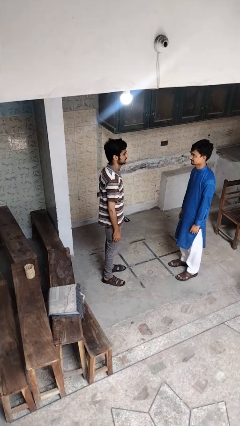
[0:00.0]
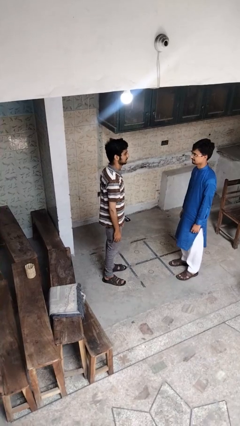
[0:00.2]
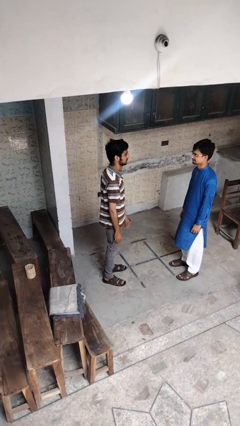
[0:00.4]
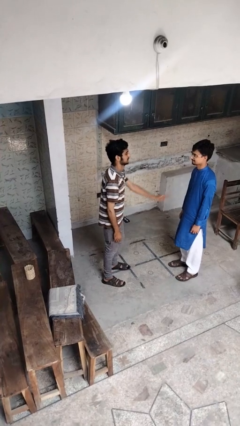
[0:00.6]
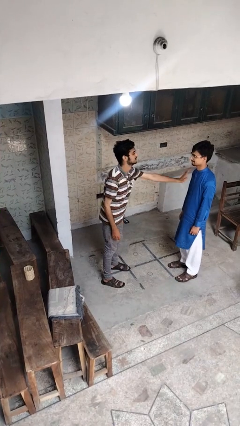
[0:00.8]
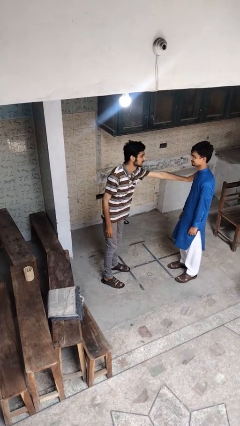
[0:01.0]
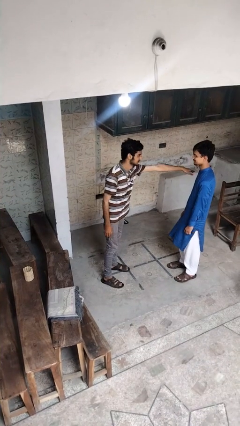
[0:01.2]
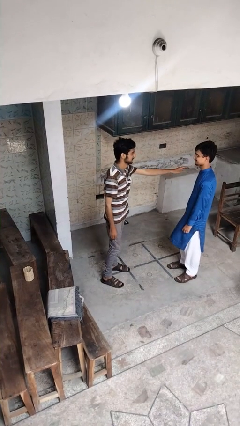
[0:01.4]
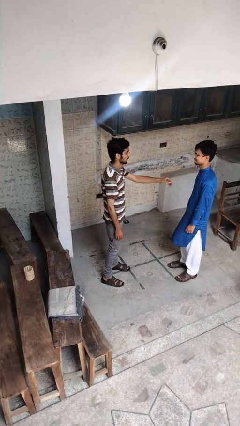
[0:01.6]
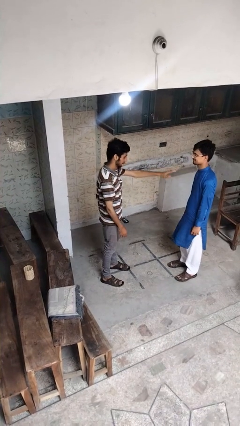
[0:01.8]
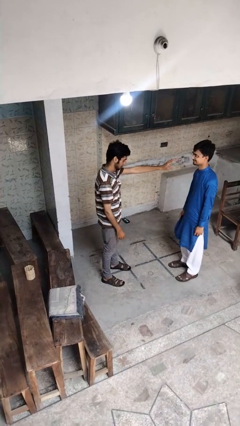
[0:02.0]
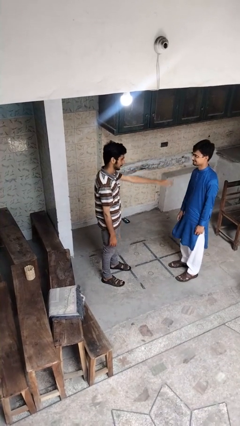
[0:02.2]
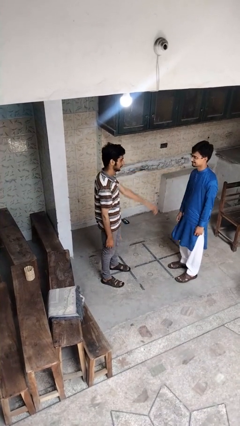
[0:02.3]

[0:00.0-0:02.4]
person shoves person

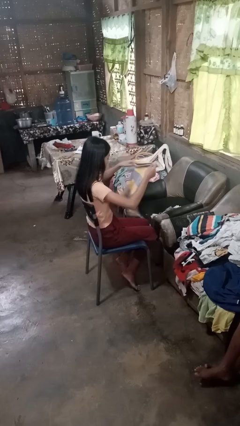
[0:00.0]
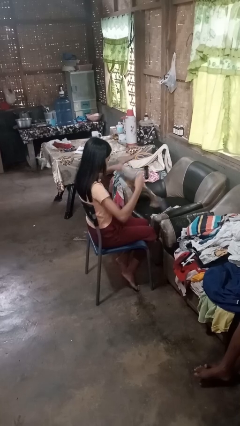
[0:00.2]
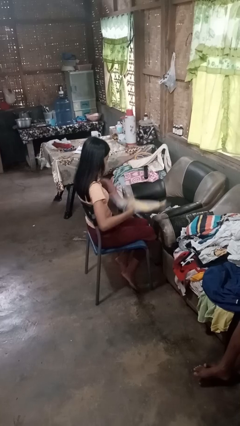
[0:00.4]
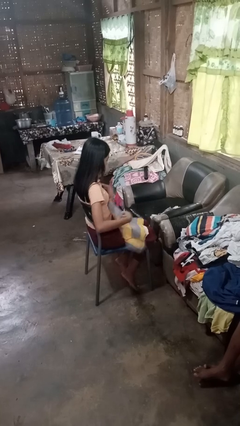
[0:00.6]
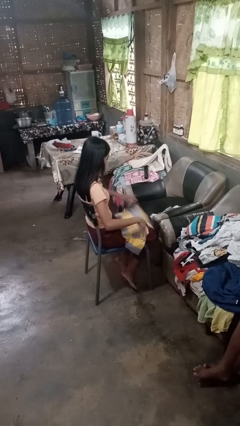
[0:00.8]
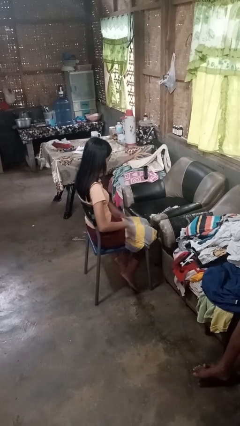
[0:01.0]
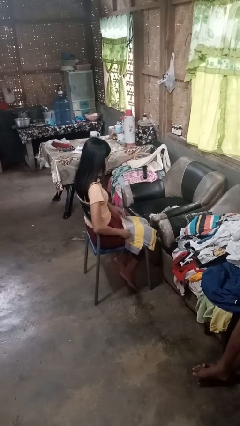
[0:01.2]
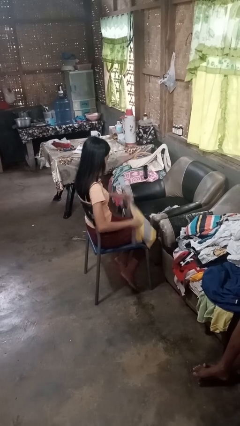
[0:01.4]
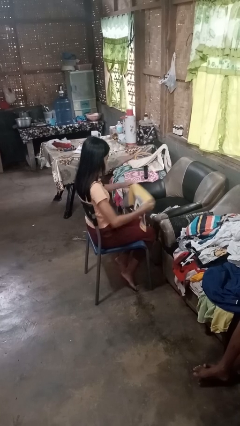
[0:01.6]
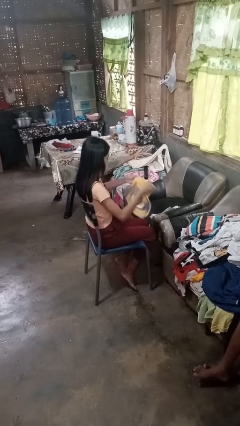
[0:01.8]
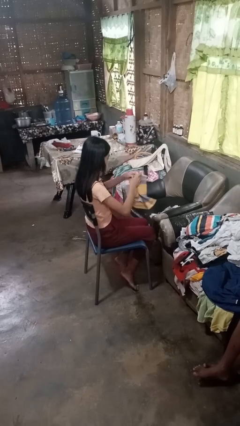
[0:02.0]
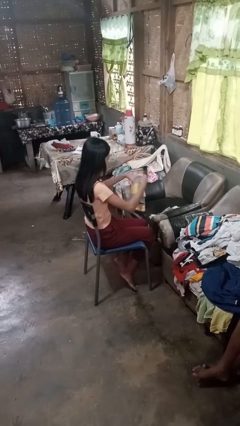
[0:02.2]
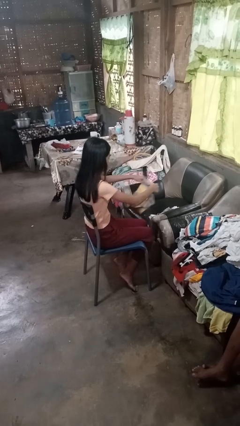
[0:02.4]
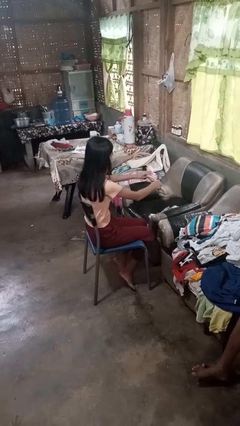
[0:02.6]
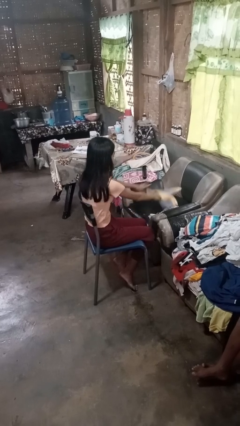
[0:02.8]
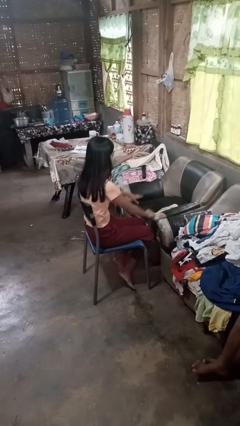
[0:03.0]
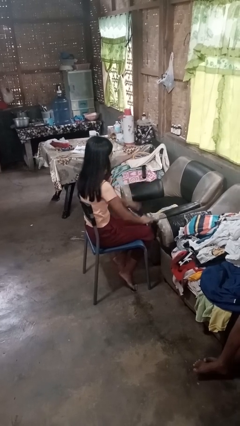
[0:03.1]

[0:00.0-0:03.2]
person folds shirt

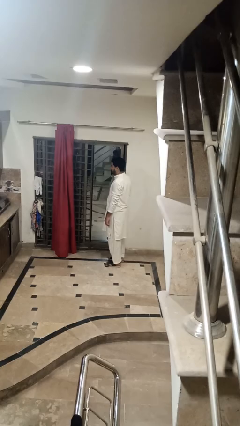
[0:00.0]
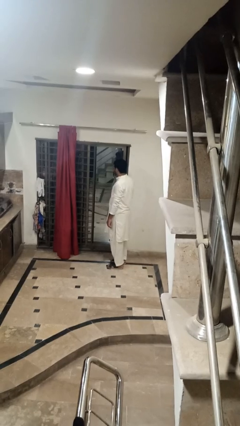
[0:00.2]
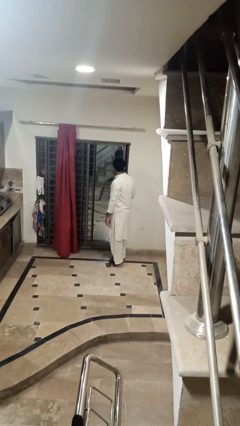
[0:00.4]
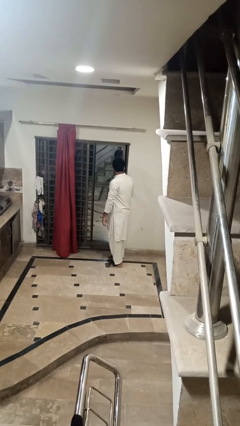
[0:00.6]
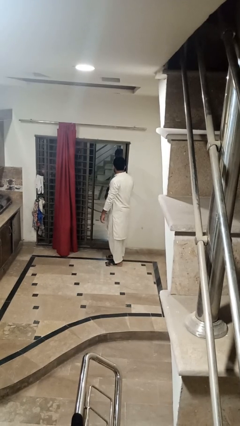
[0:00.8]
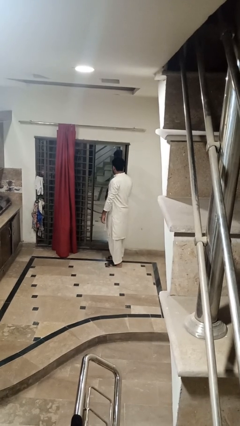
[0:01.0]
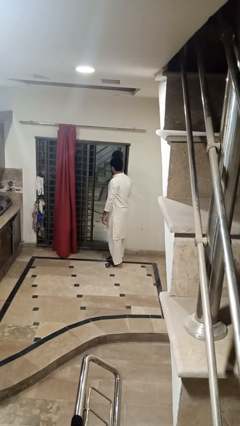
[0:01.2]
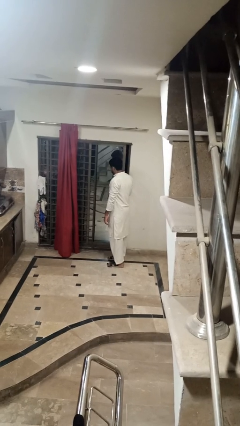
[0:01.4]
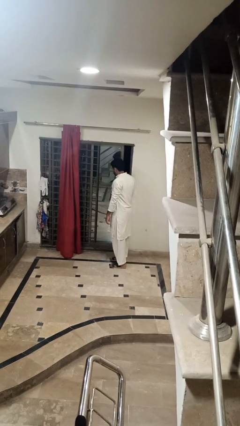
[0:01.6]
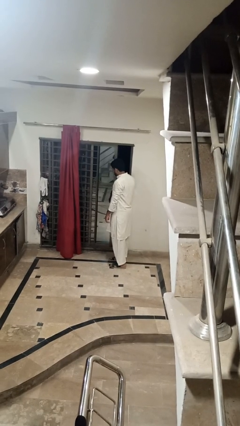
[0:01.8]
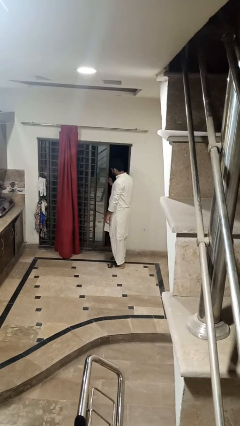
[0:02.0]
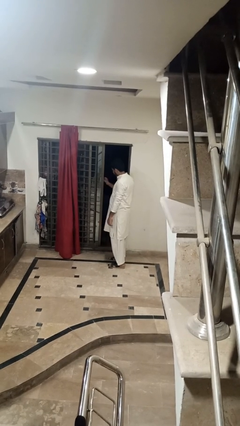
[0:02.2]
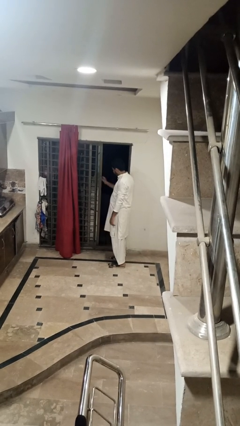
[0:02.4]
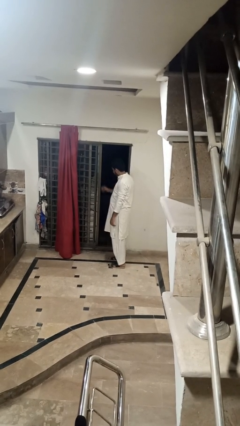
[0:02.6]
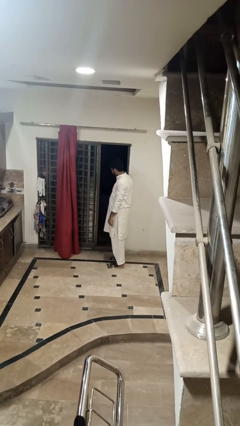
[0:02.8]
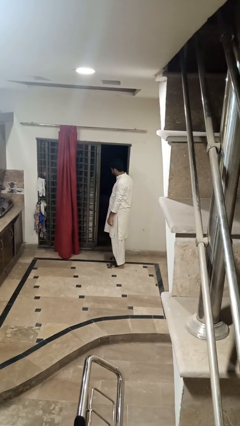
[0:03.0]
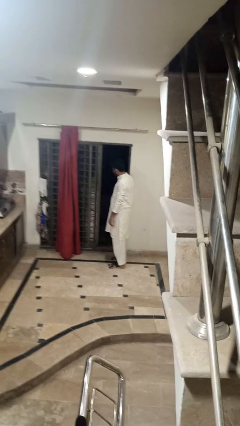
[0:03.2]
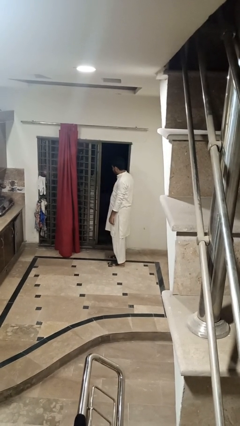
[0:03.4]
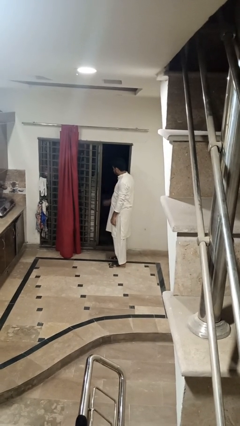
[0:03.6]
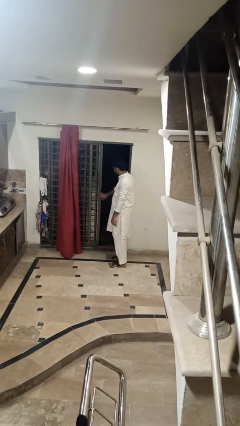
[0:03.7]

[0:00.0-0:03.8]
person opens home window

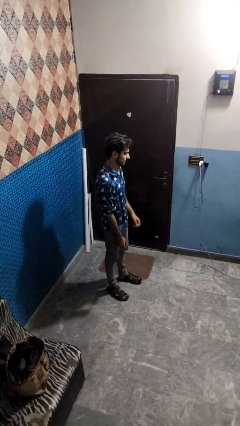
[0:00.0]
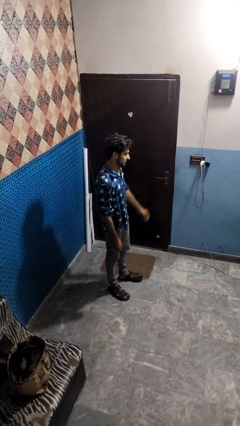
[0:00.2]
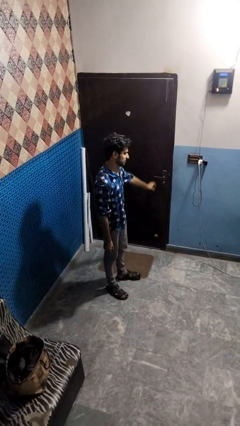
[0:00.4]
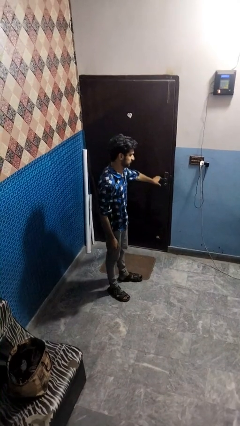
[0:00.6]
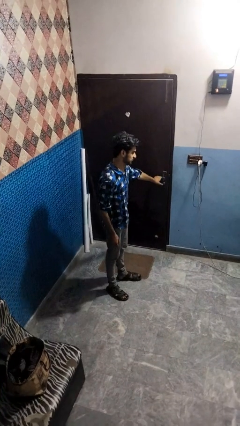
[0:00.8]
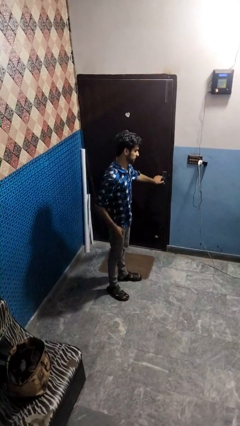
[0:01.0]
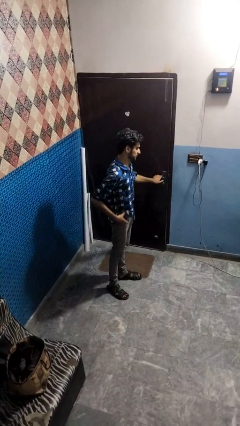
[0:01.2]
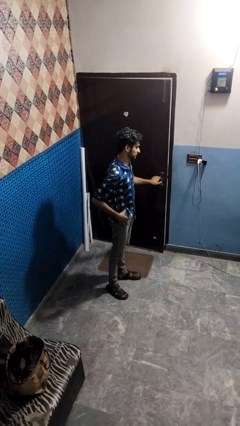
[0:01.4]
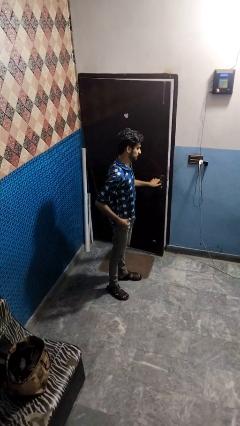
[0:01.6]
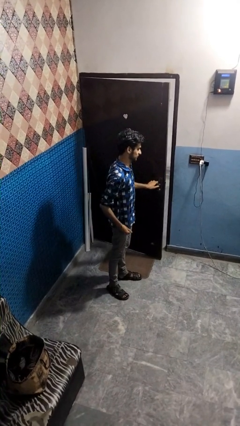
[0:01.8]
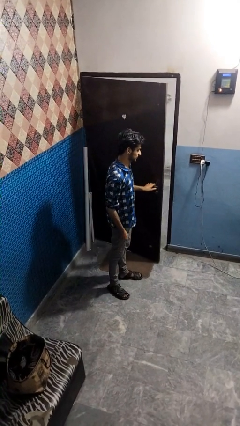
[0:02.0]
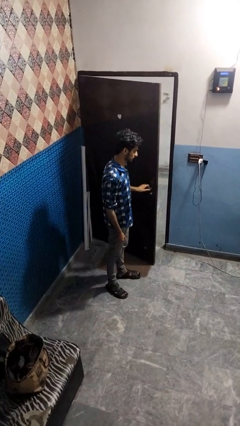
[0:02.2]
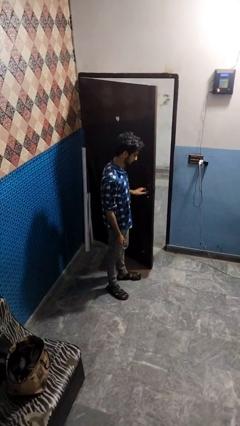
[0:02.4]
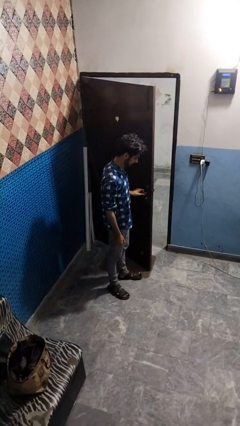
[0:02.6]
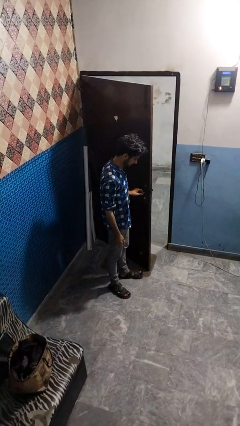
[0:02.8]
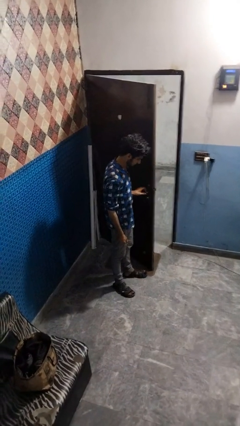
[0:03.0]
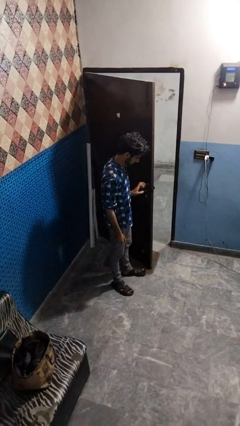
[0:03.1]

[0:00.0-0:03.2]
person opens facility door

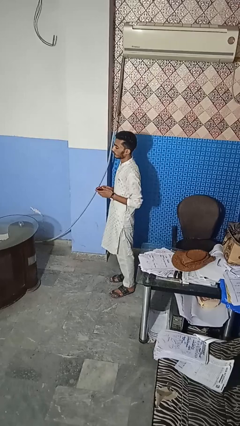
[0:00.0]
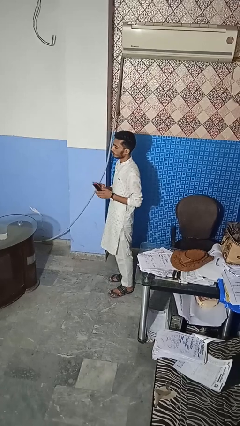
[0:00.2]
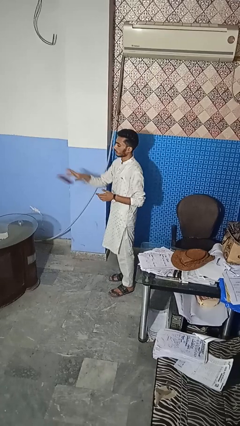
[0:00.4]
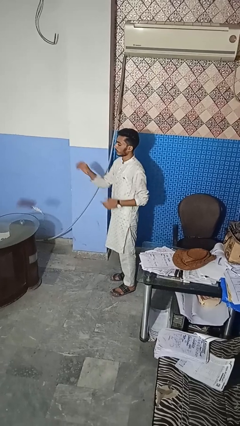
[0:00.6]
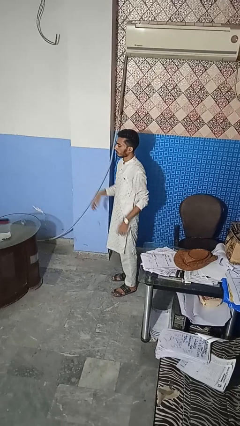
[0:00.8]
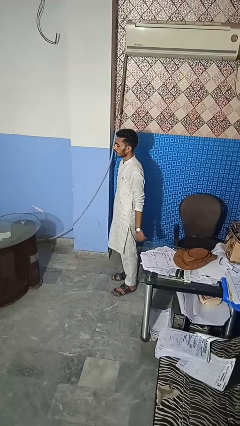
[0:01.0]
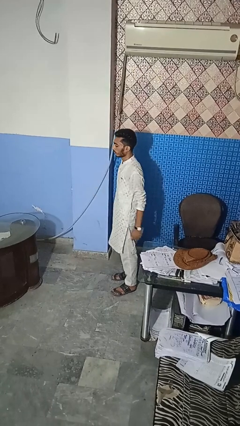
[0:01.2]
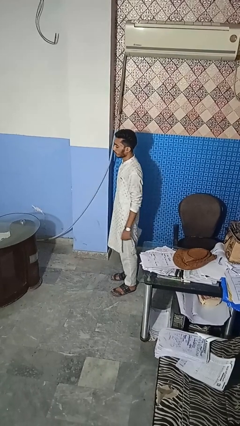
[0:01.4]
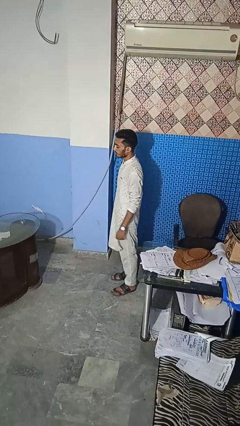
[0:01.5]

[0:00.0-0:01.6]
person throws object on table

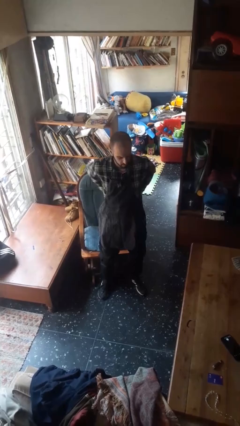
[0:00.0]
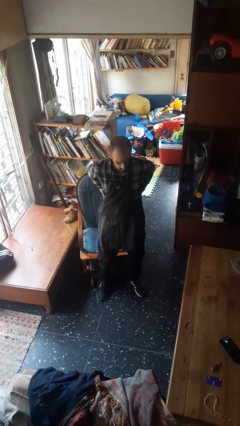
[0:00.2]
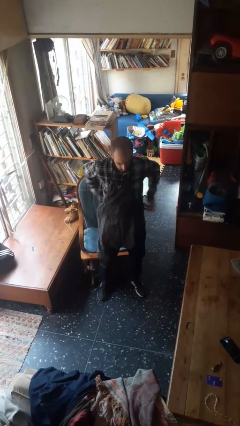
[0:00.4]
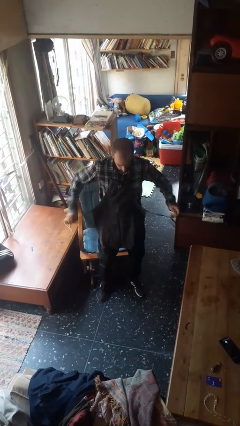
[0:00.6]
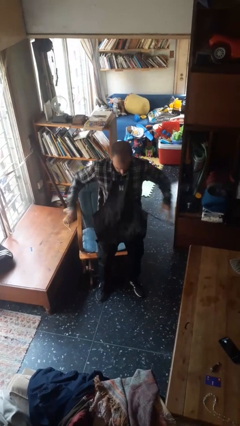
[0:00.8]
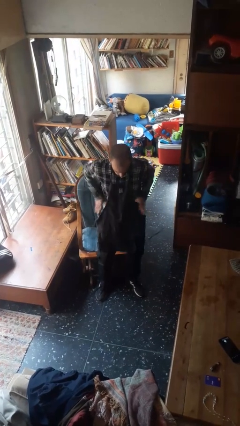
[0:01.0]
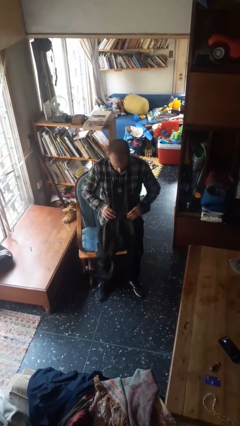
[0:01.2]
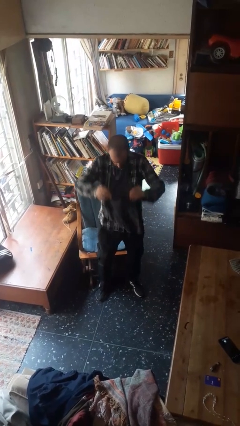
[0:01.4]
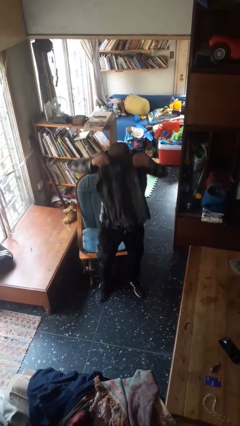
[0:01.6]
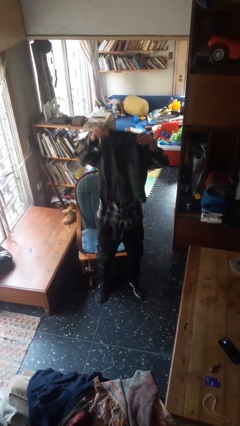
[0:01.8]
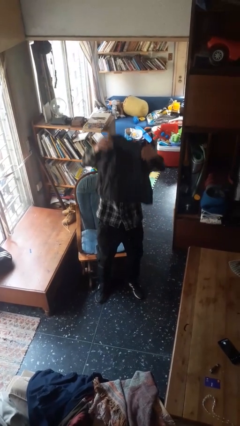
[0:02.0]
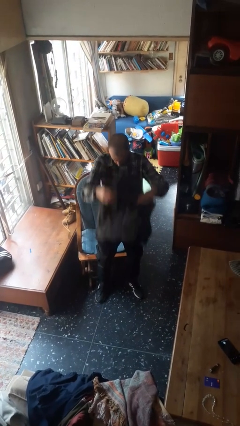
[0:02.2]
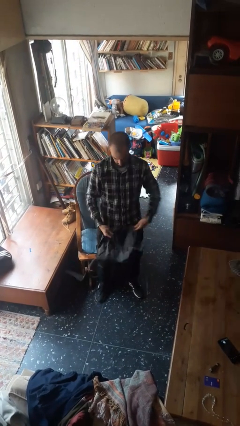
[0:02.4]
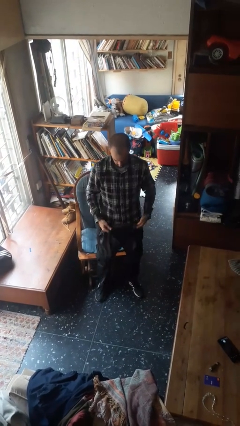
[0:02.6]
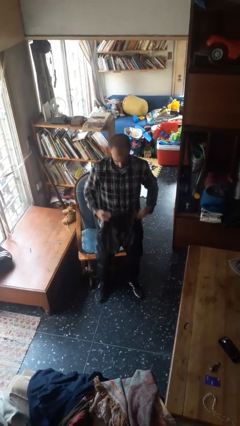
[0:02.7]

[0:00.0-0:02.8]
person takes off apron

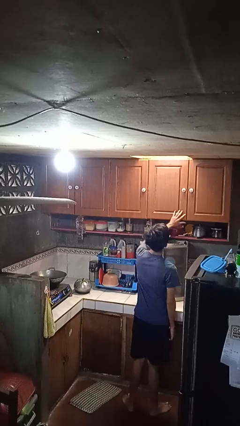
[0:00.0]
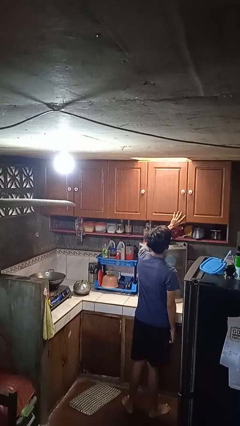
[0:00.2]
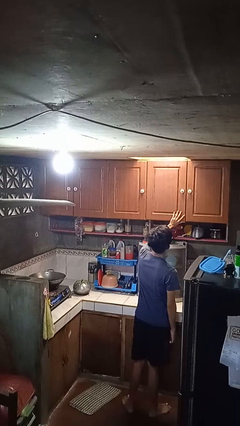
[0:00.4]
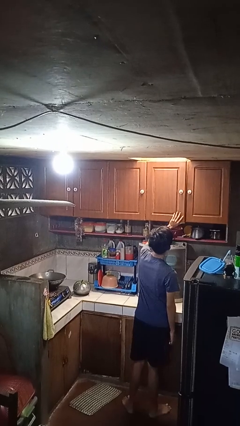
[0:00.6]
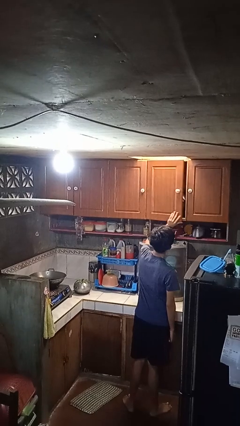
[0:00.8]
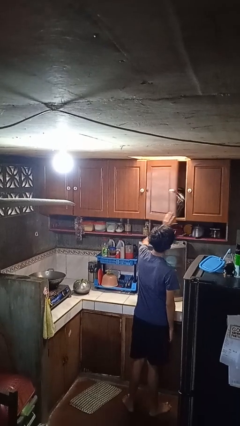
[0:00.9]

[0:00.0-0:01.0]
person opens cabinet
